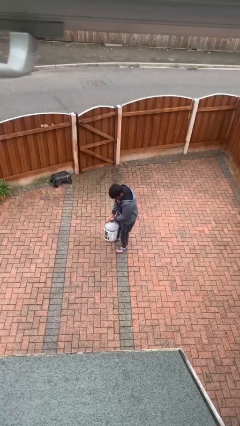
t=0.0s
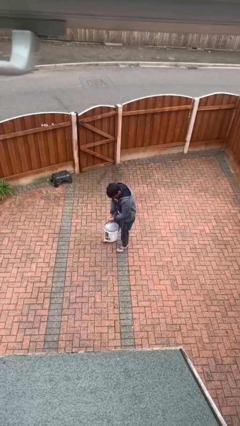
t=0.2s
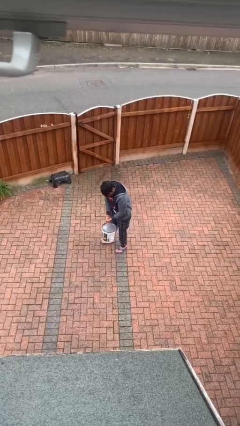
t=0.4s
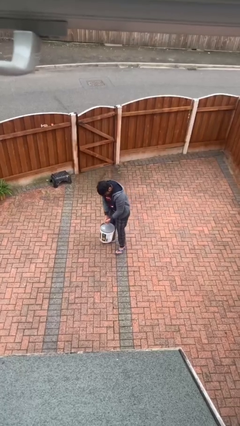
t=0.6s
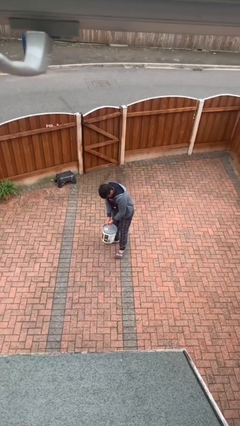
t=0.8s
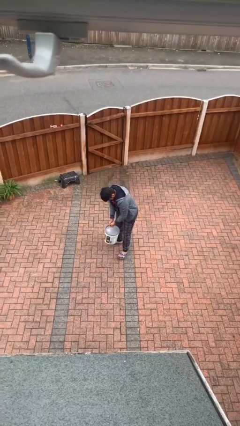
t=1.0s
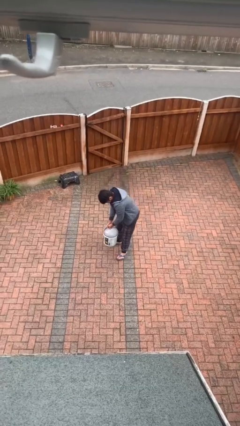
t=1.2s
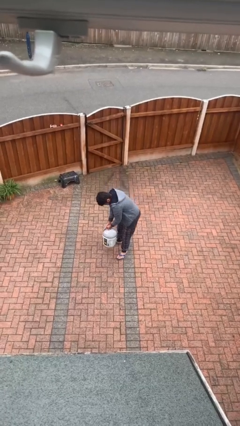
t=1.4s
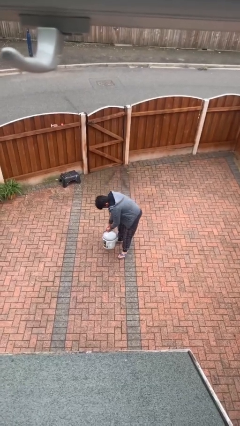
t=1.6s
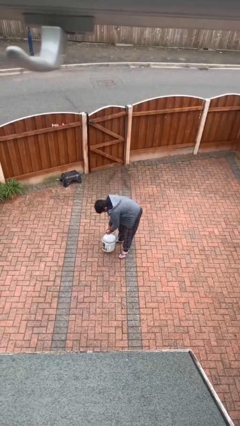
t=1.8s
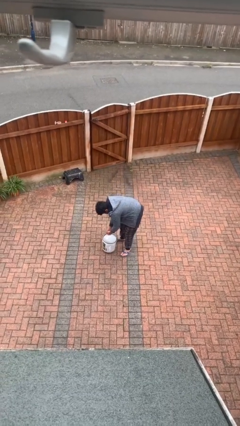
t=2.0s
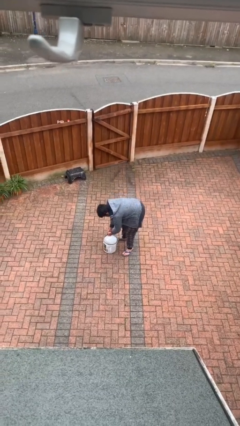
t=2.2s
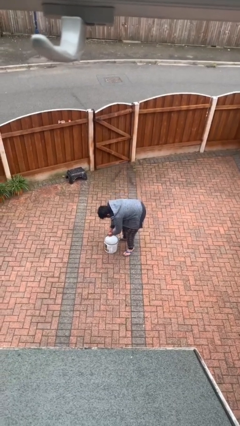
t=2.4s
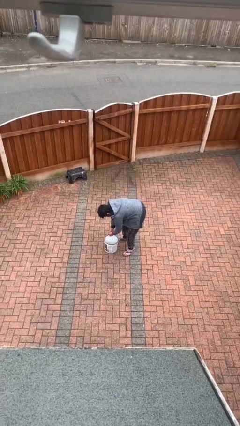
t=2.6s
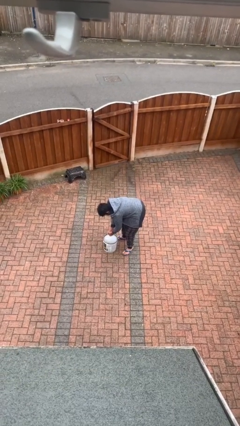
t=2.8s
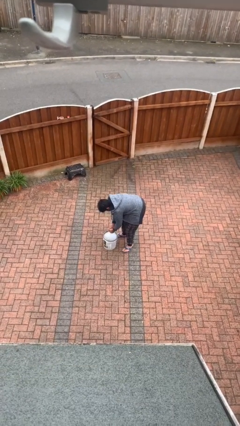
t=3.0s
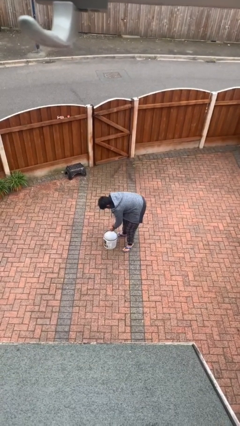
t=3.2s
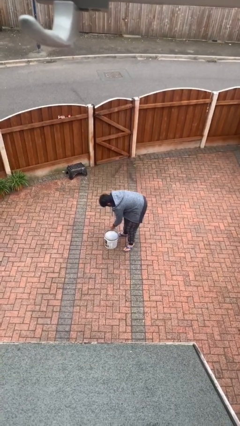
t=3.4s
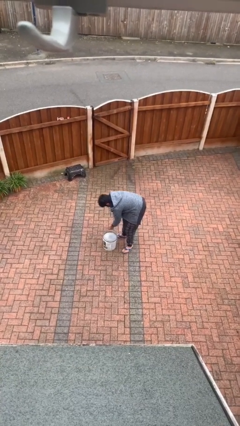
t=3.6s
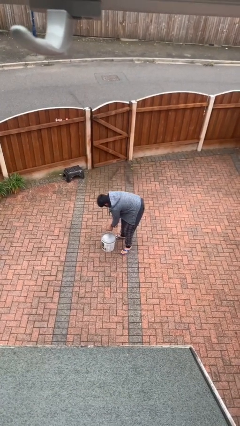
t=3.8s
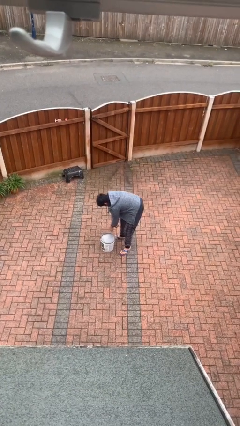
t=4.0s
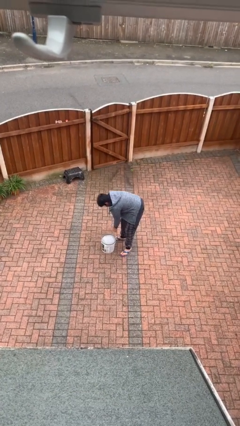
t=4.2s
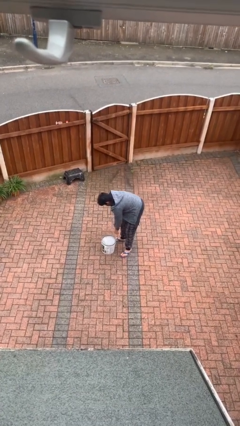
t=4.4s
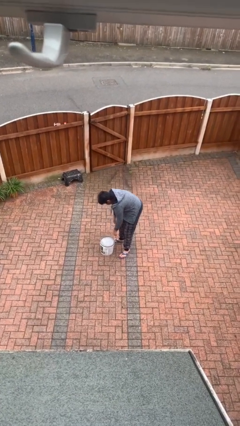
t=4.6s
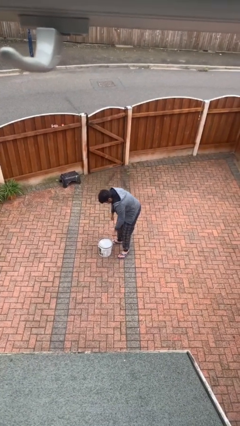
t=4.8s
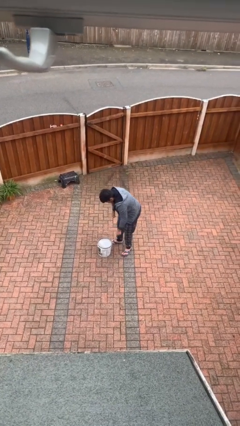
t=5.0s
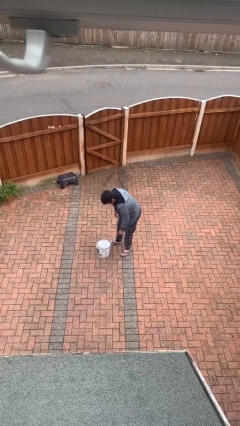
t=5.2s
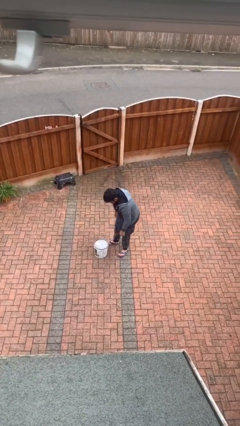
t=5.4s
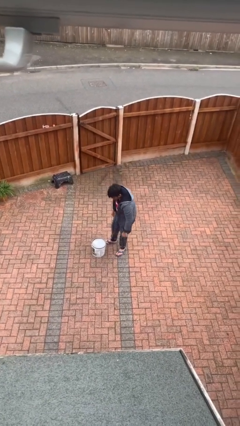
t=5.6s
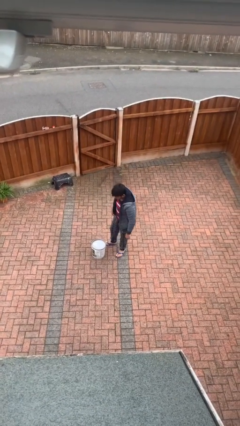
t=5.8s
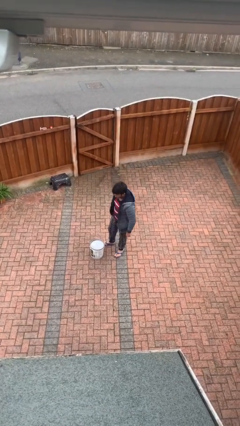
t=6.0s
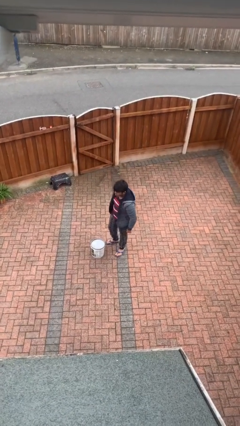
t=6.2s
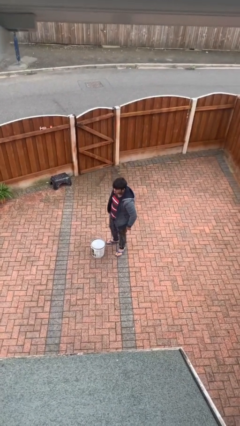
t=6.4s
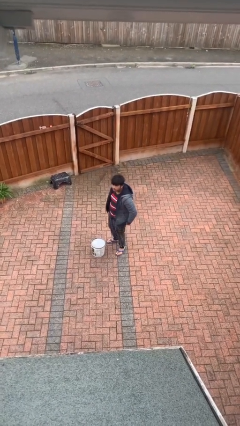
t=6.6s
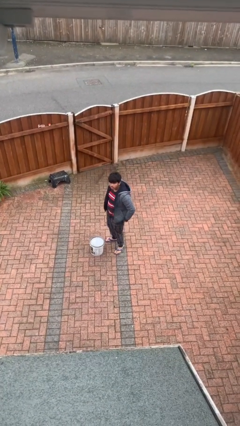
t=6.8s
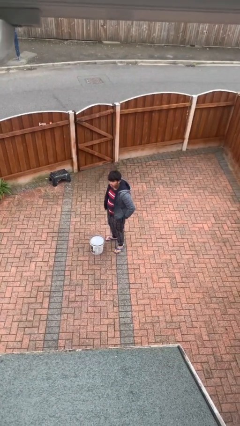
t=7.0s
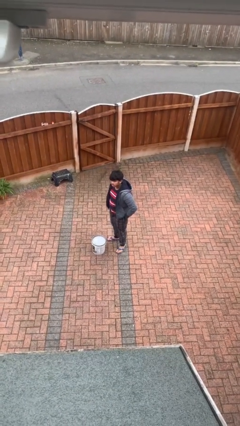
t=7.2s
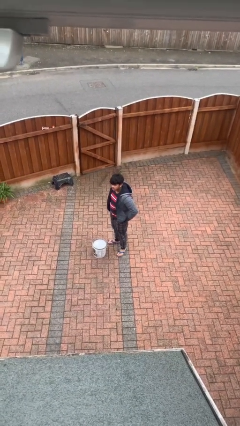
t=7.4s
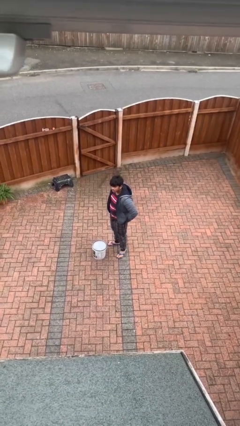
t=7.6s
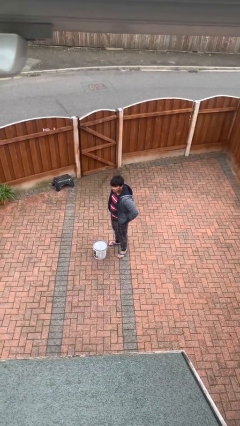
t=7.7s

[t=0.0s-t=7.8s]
person puts down object on floor

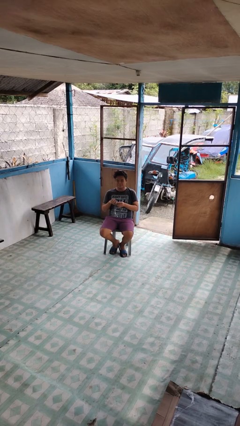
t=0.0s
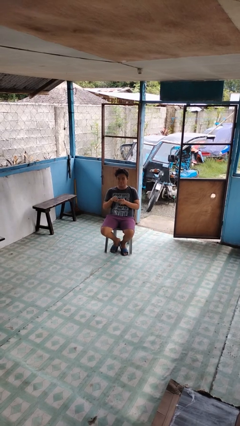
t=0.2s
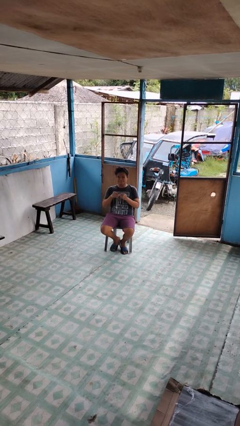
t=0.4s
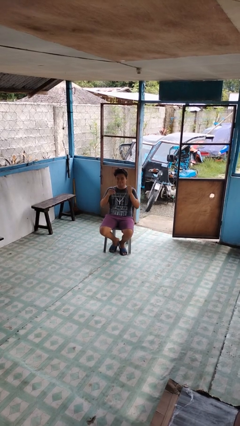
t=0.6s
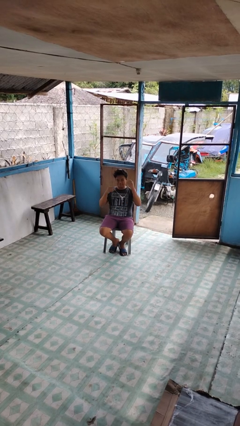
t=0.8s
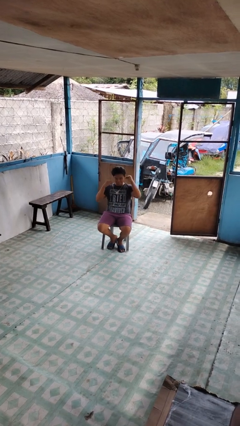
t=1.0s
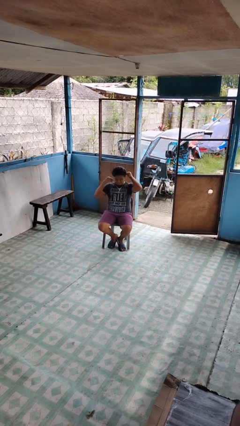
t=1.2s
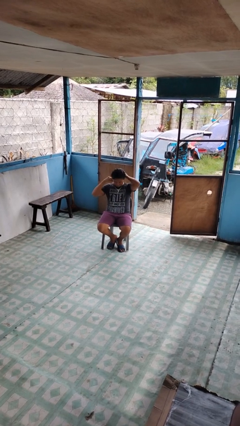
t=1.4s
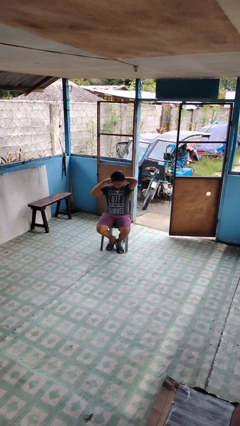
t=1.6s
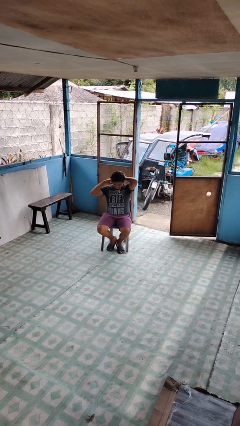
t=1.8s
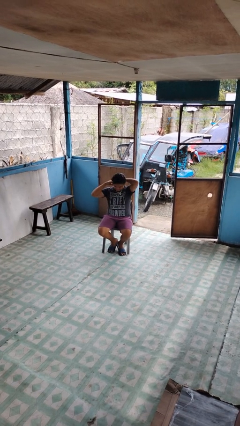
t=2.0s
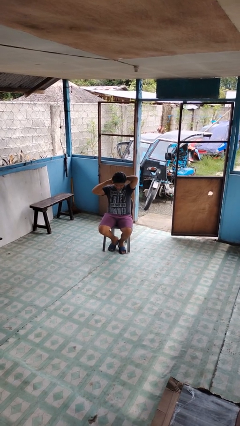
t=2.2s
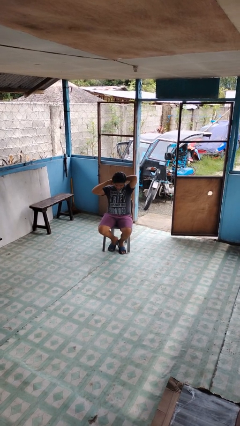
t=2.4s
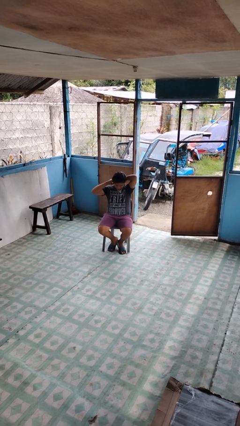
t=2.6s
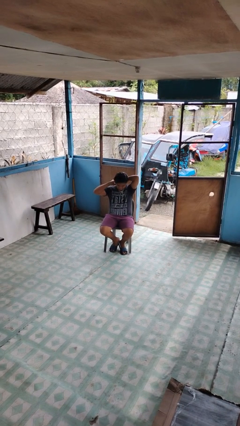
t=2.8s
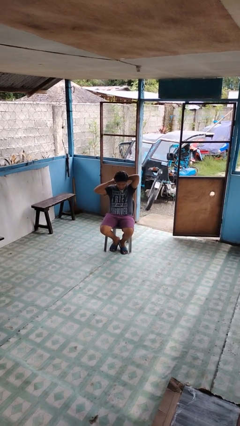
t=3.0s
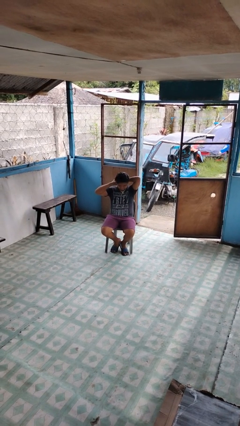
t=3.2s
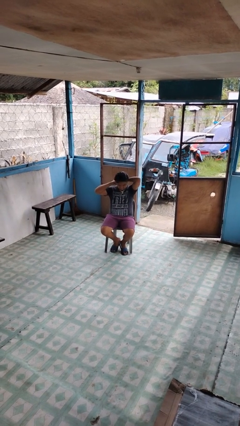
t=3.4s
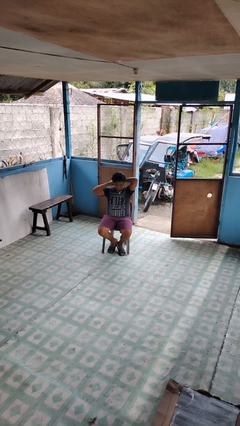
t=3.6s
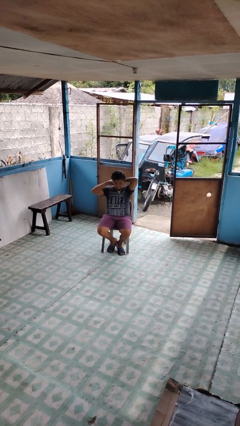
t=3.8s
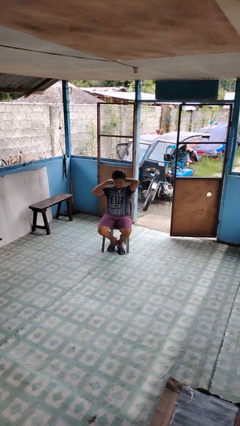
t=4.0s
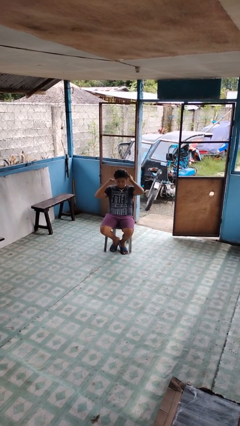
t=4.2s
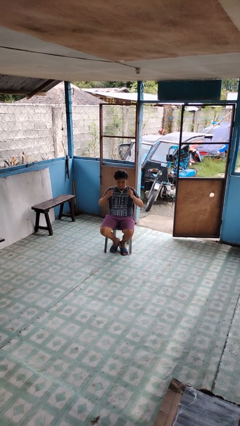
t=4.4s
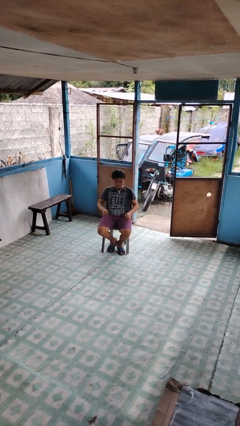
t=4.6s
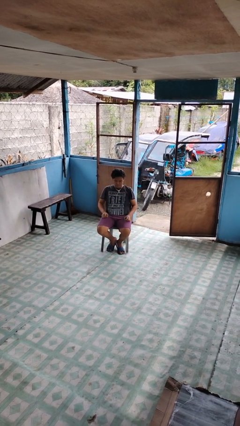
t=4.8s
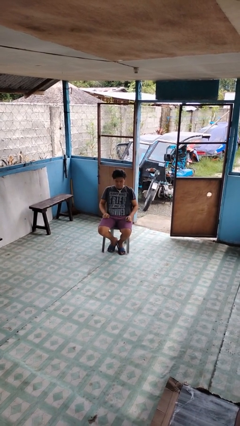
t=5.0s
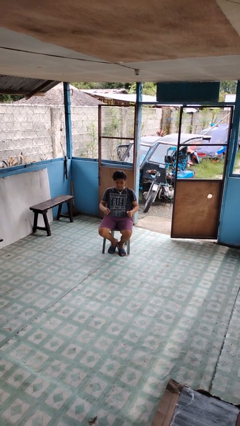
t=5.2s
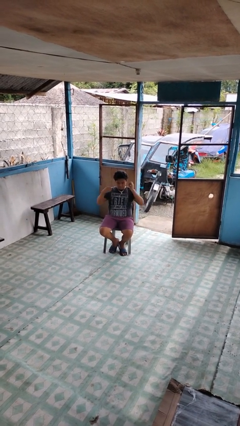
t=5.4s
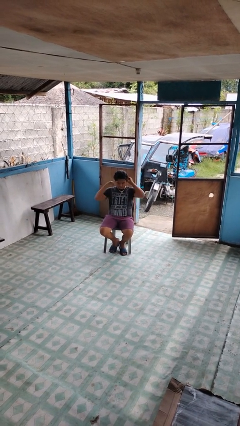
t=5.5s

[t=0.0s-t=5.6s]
person puts on necklace

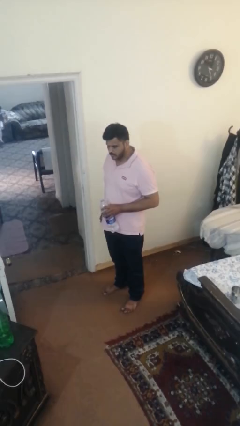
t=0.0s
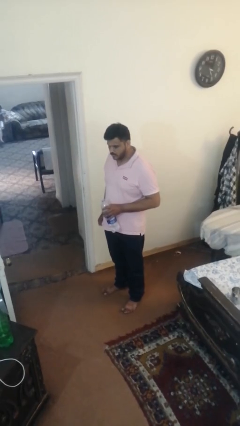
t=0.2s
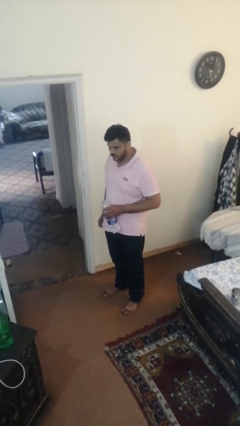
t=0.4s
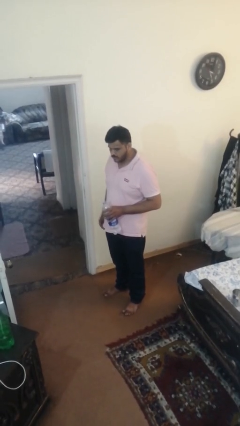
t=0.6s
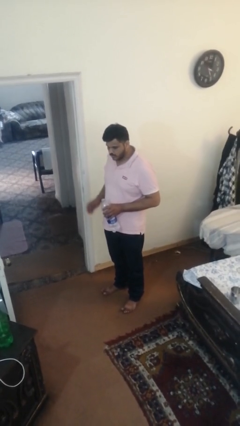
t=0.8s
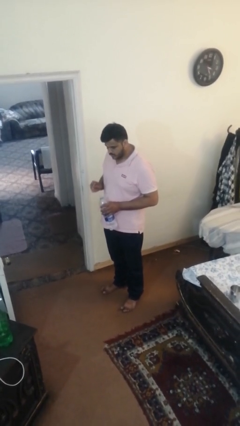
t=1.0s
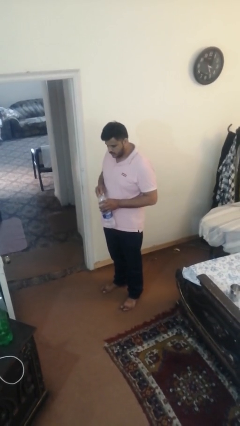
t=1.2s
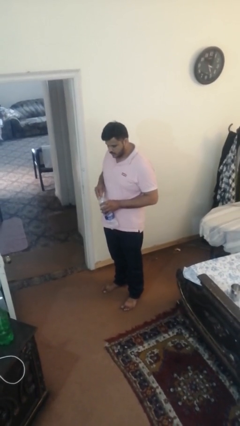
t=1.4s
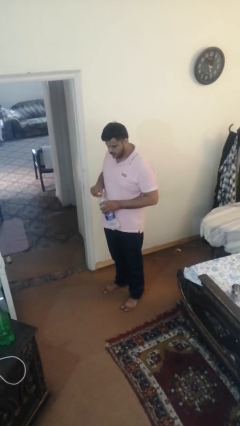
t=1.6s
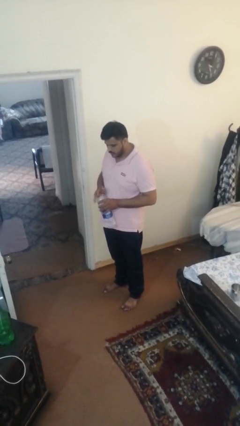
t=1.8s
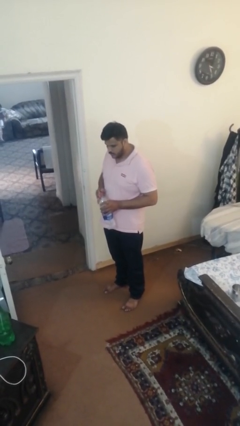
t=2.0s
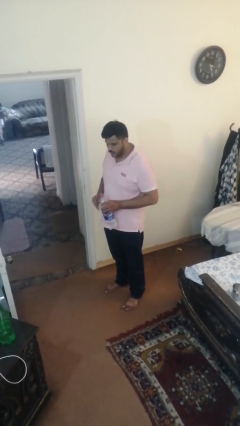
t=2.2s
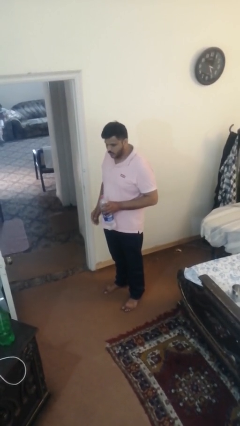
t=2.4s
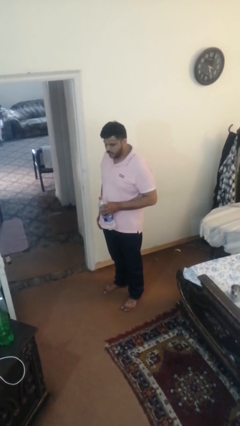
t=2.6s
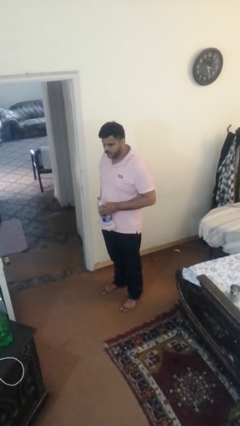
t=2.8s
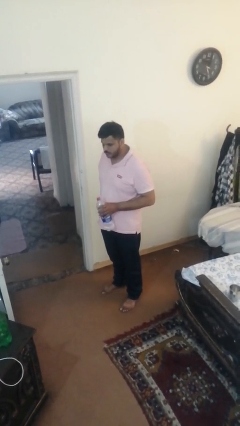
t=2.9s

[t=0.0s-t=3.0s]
person screws lid to bottle

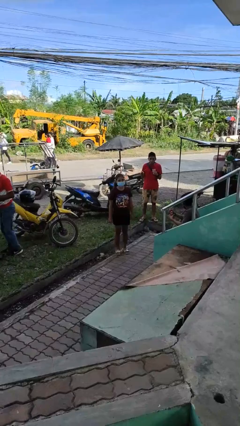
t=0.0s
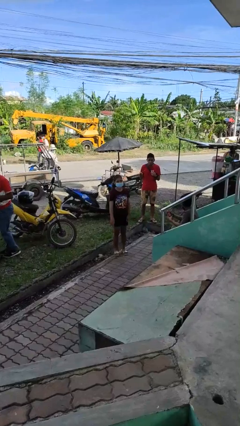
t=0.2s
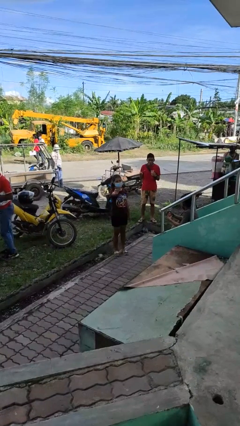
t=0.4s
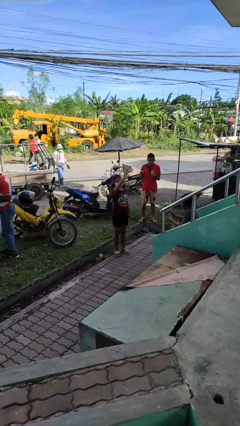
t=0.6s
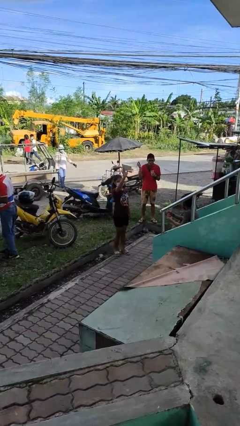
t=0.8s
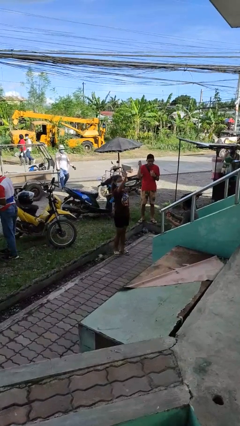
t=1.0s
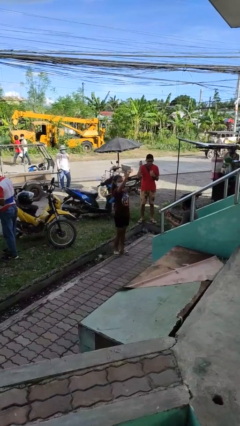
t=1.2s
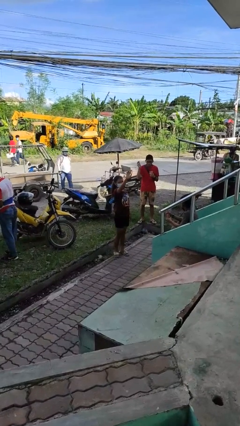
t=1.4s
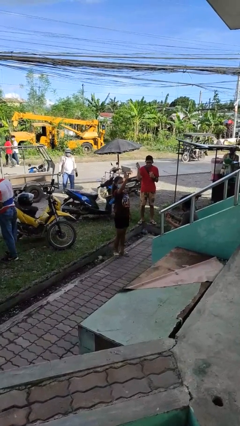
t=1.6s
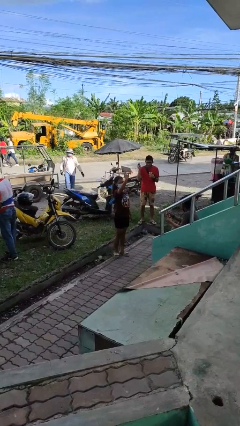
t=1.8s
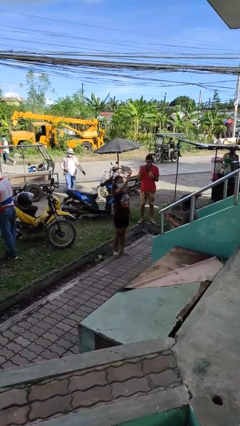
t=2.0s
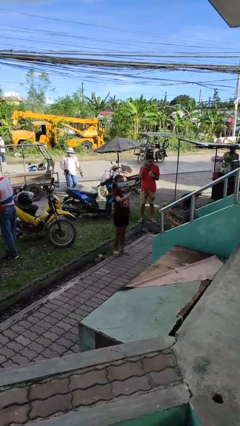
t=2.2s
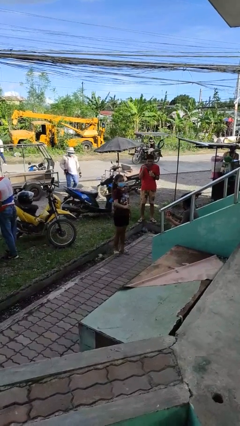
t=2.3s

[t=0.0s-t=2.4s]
person waves at person
